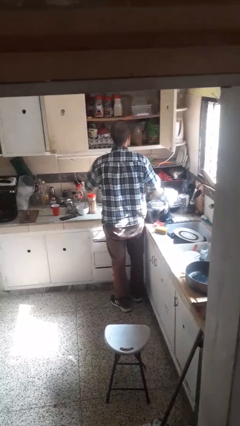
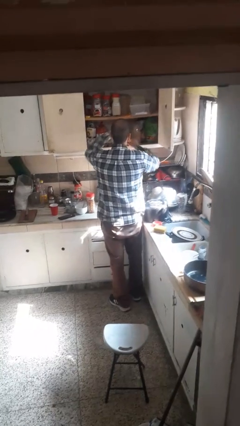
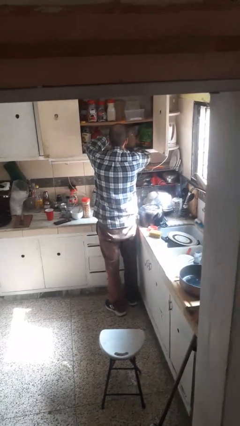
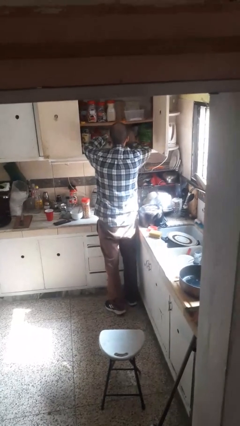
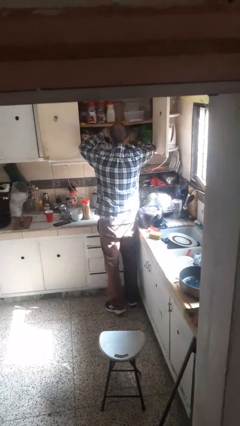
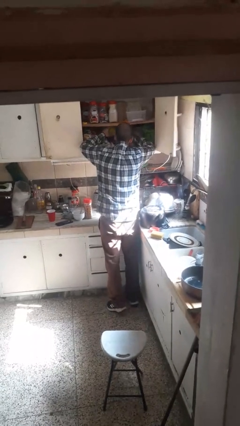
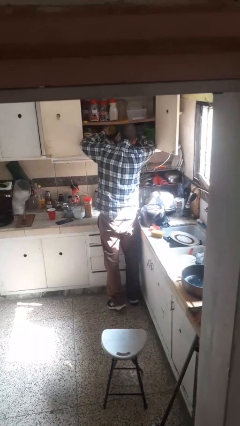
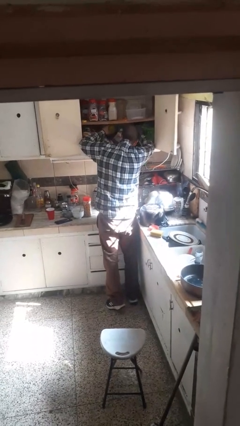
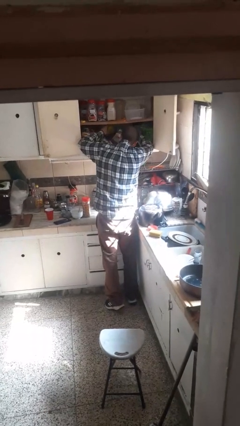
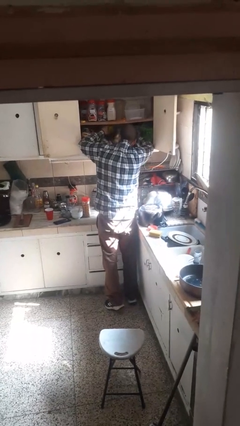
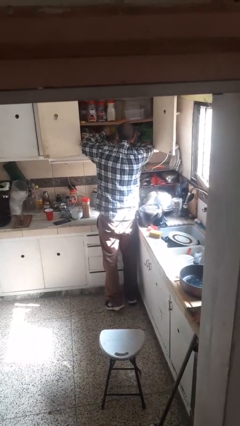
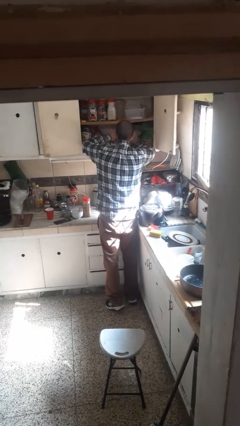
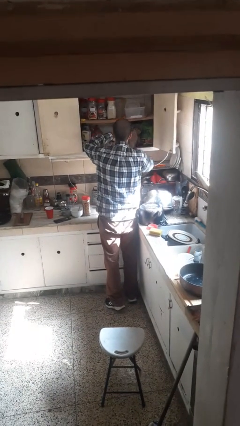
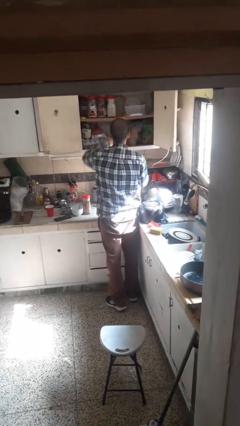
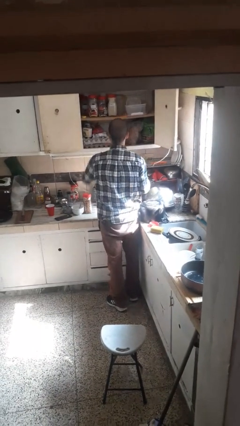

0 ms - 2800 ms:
person searches in cabinet

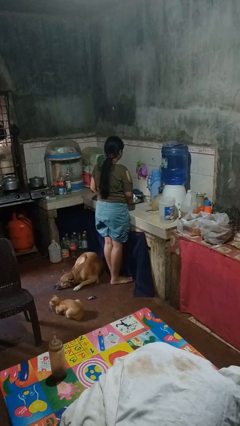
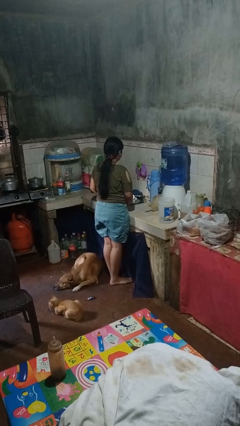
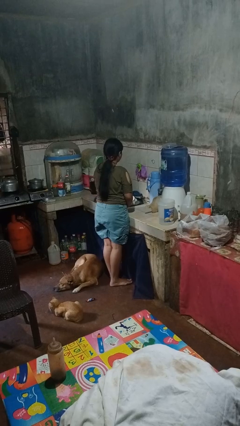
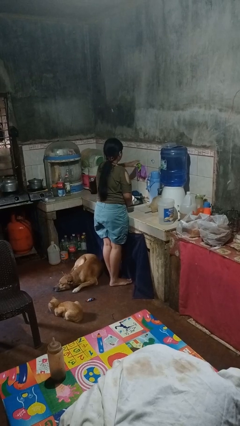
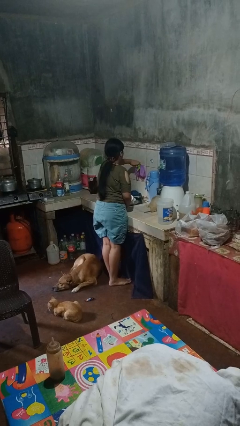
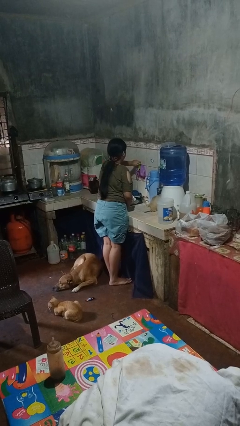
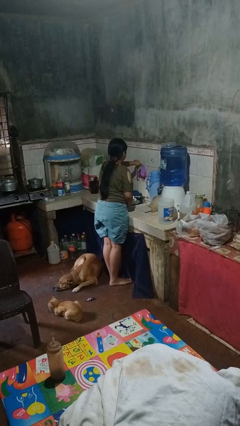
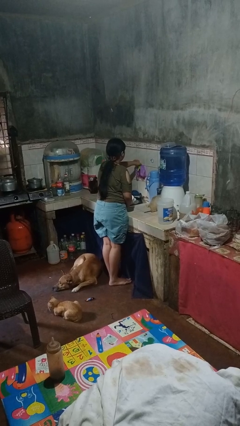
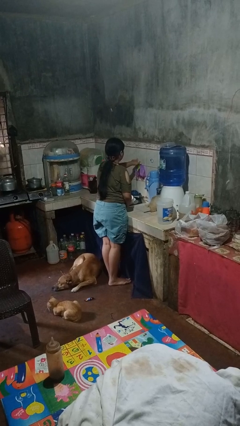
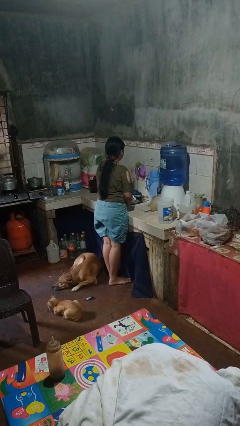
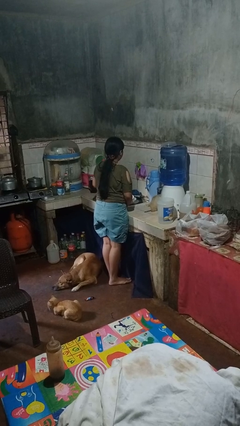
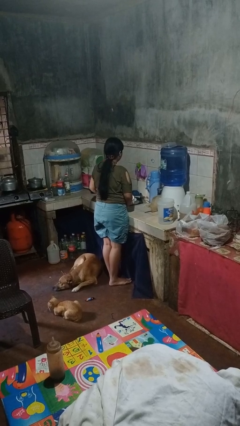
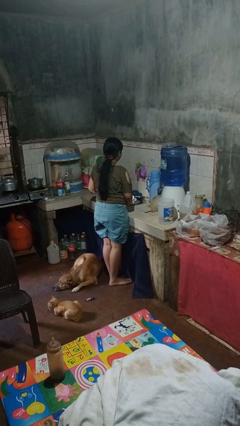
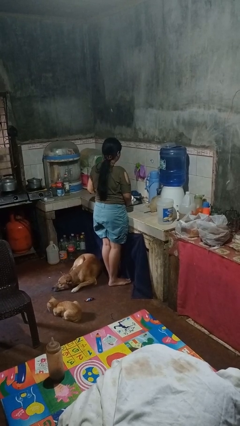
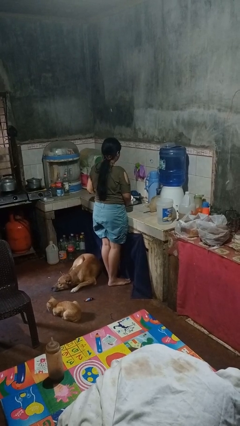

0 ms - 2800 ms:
person turns on faucet

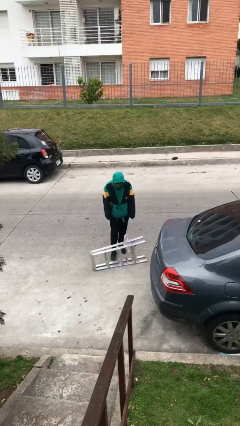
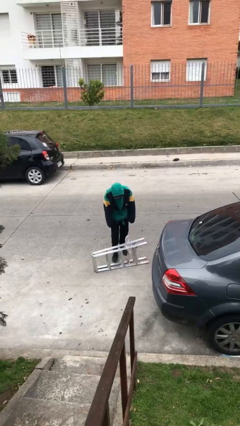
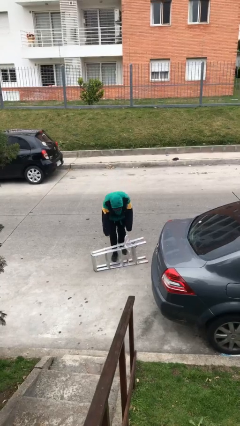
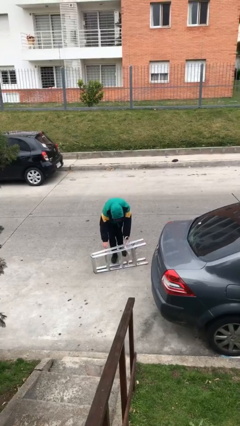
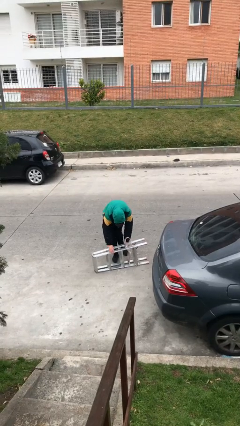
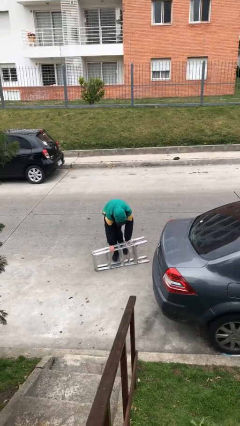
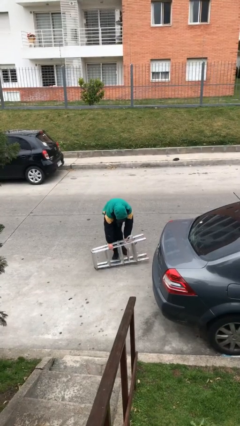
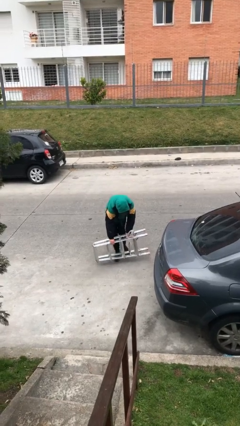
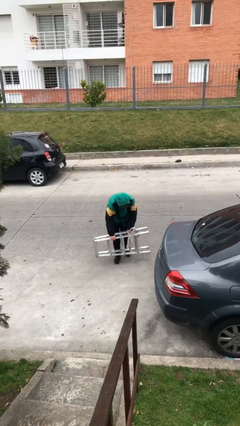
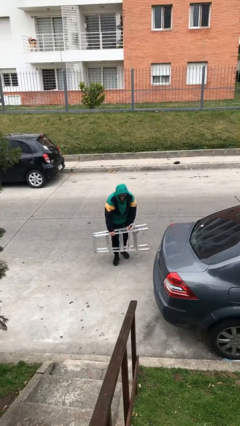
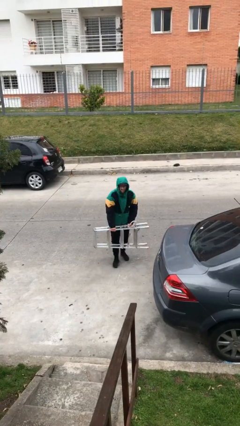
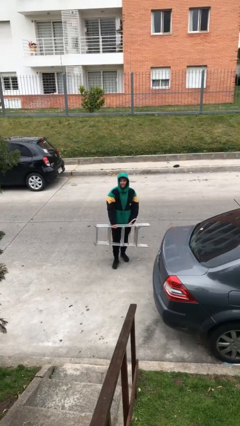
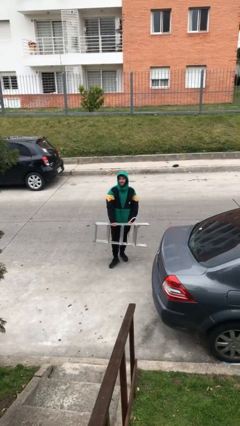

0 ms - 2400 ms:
person picks up object from floor

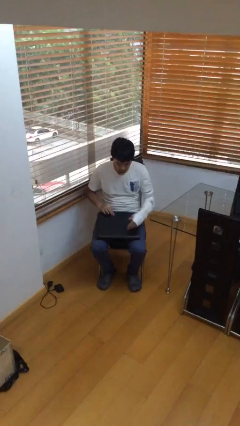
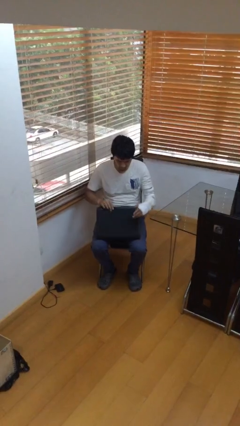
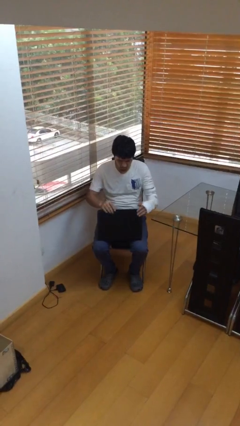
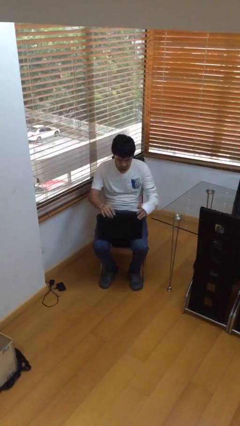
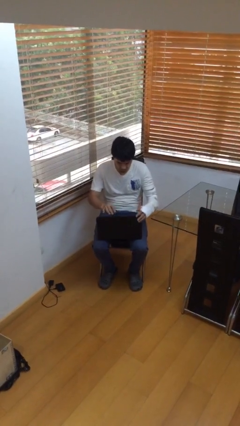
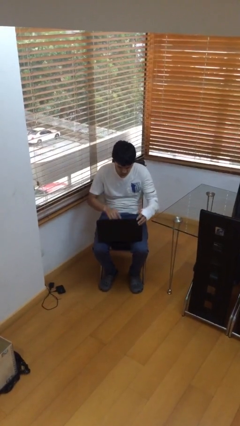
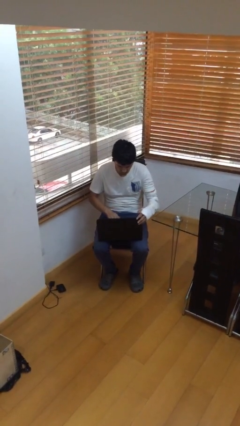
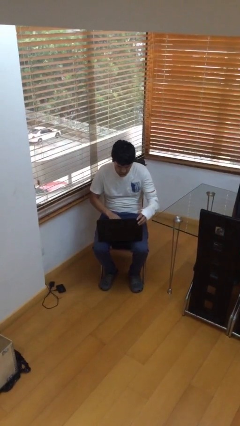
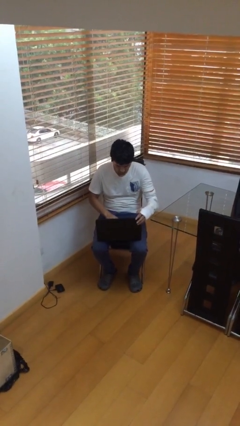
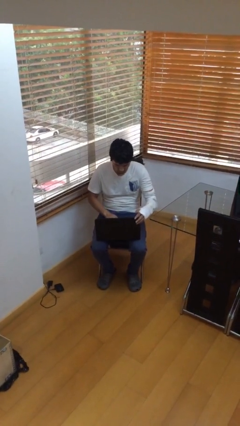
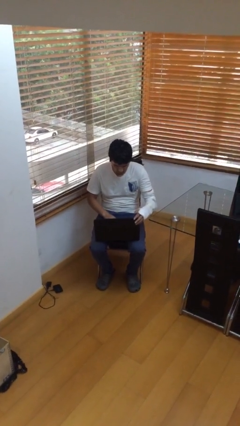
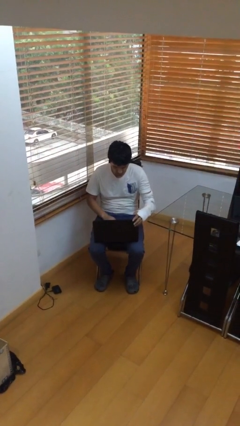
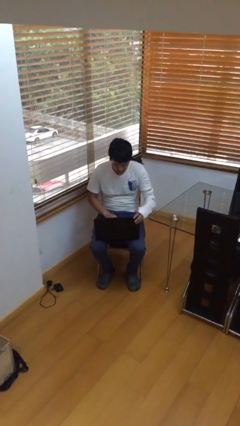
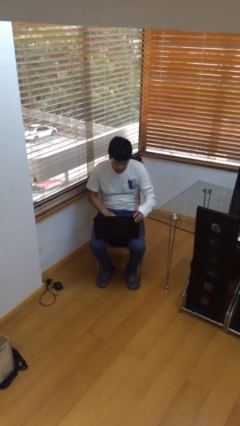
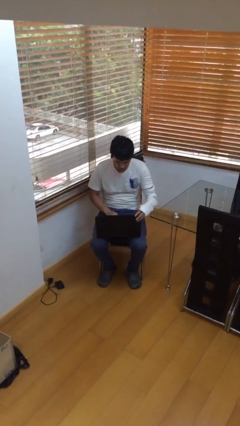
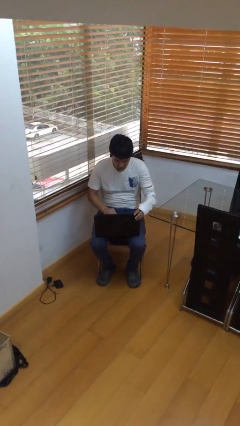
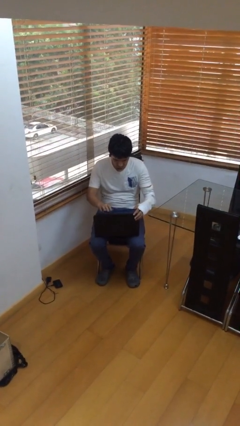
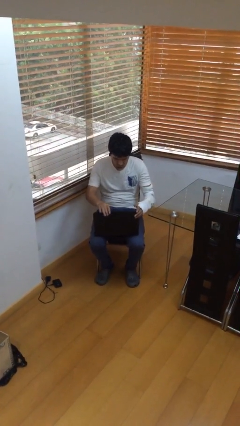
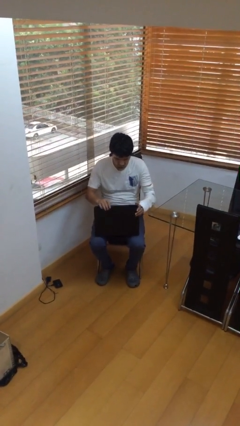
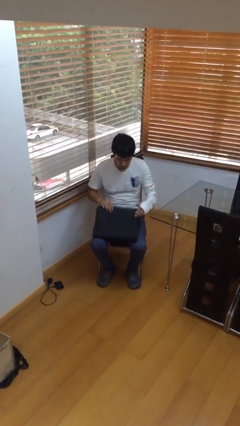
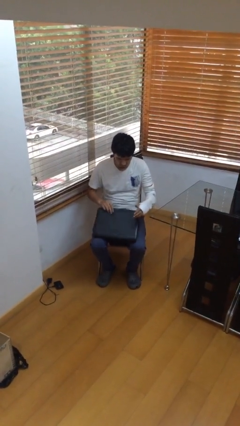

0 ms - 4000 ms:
person interacts with laptop

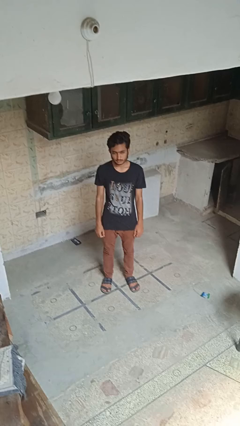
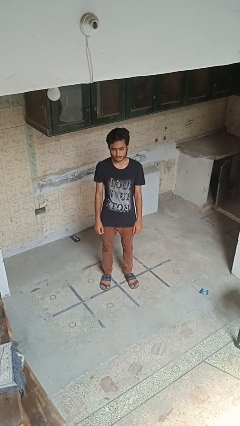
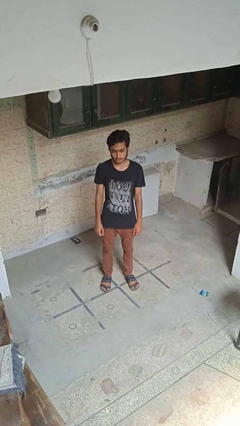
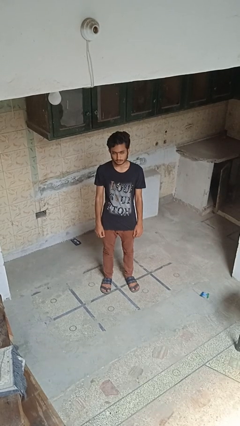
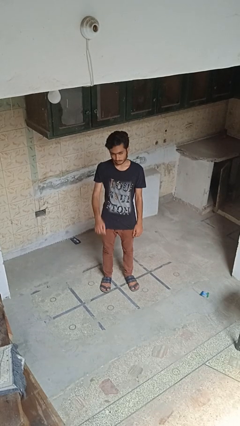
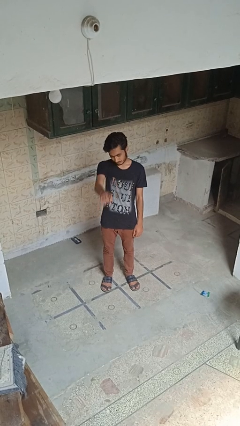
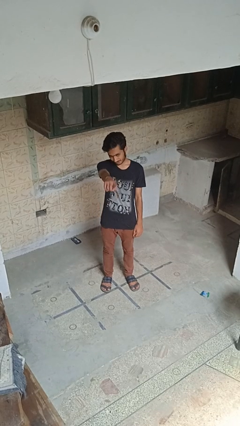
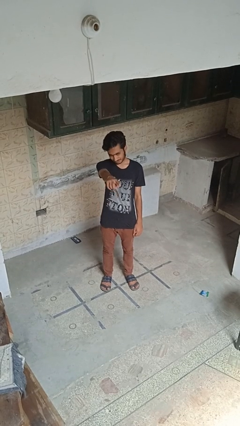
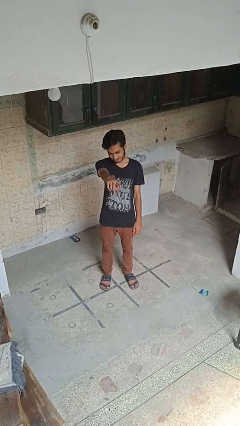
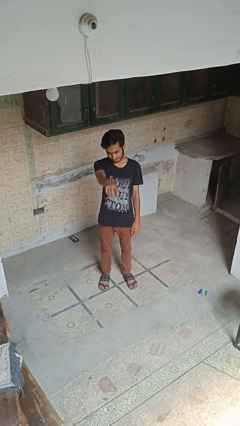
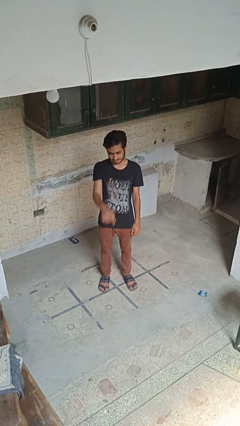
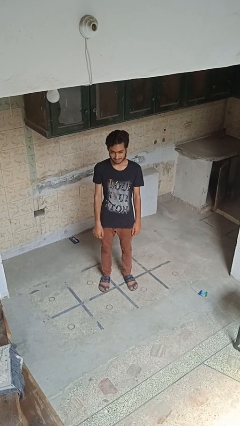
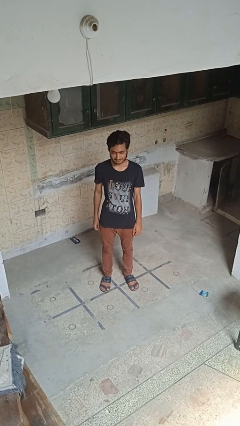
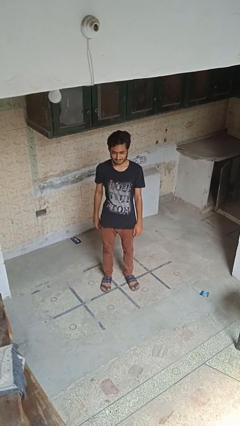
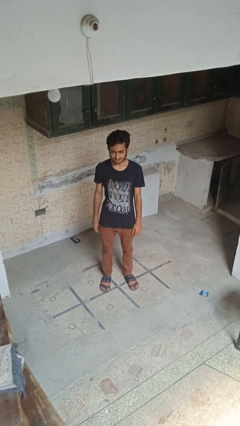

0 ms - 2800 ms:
person points at person

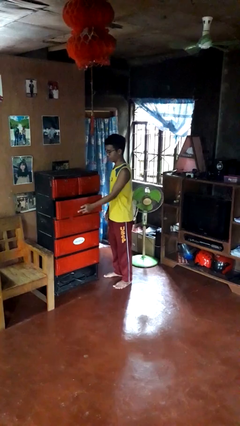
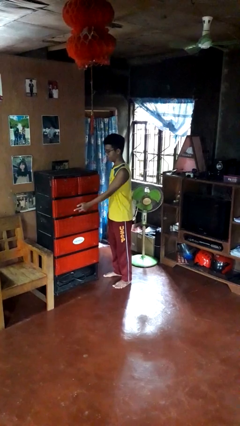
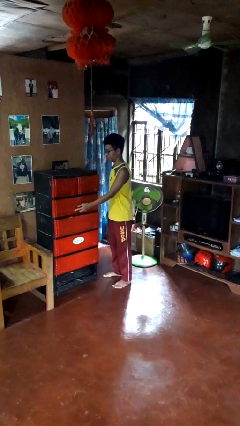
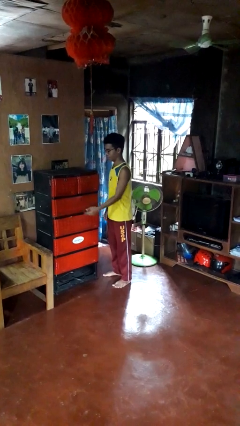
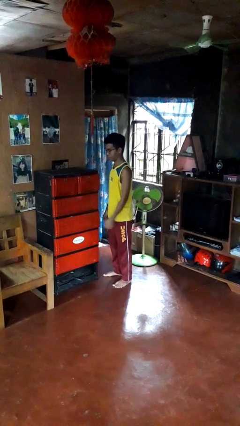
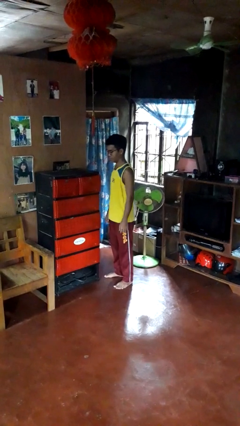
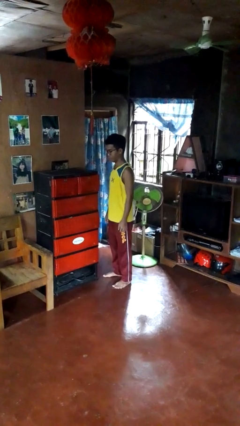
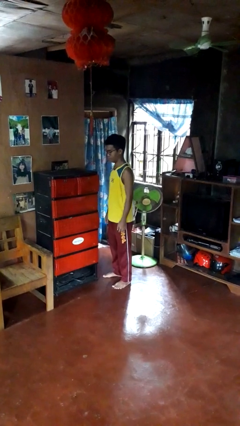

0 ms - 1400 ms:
person closes dresser drawer

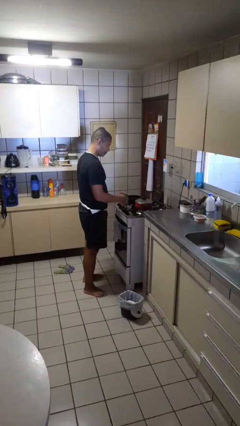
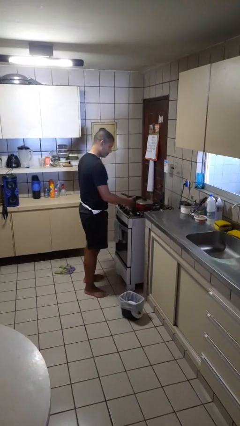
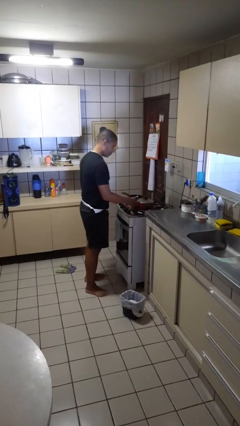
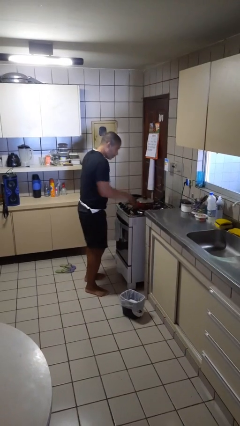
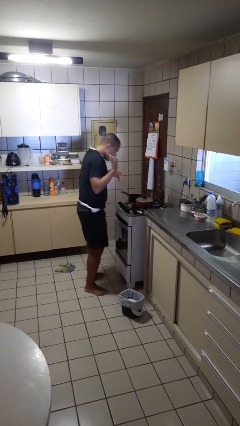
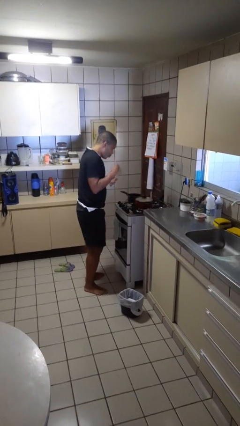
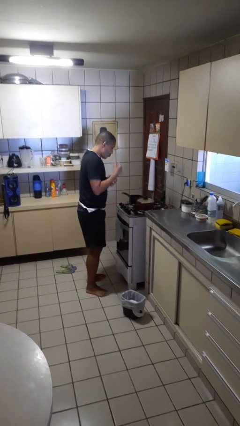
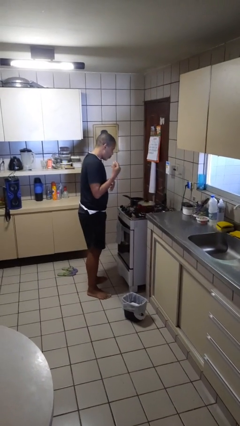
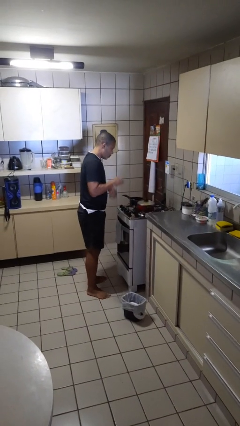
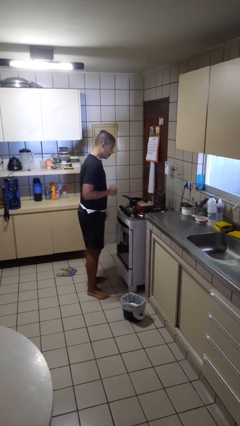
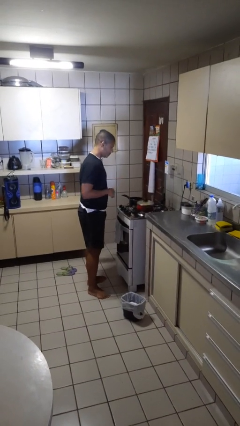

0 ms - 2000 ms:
person burns hand
